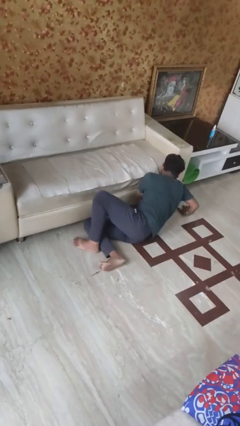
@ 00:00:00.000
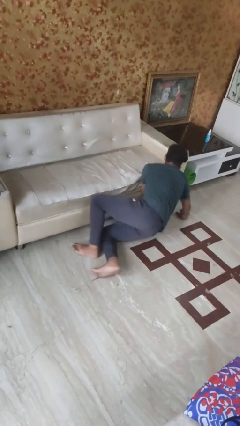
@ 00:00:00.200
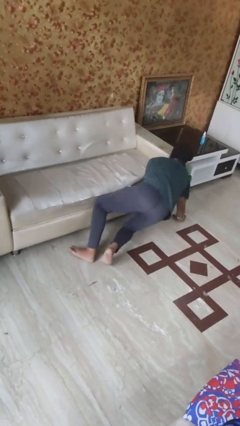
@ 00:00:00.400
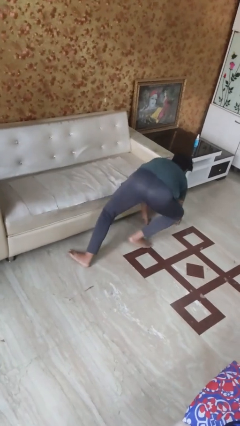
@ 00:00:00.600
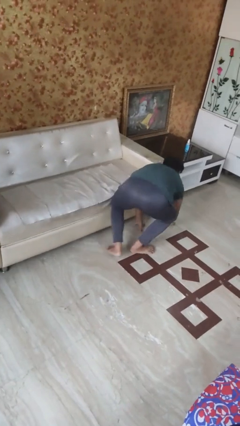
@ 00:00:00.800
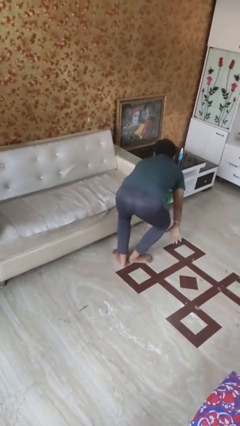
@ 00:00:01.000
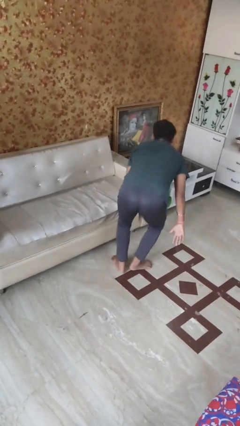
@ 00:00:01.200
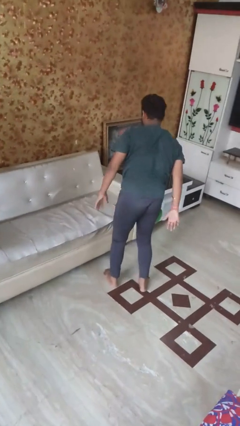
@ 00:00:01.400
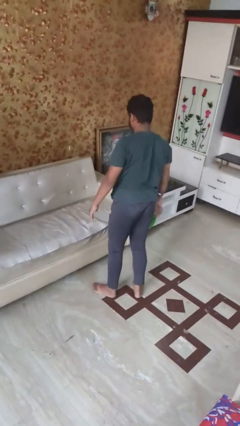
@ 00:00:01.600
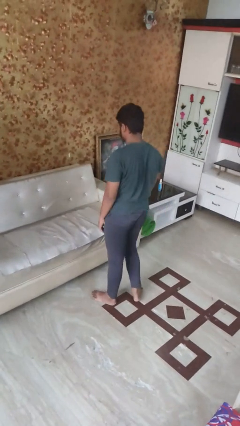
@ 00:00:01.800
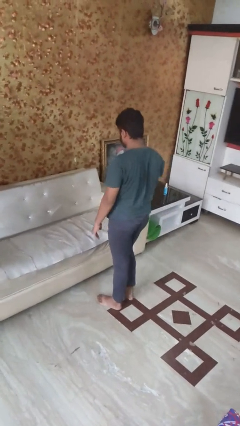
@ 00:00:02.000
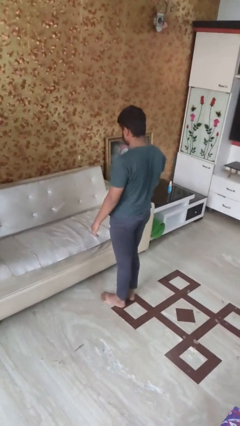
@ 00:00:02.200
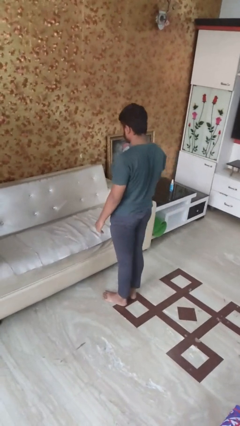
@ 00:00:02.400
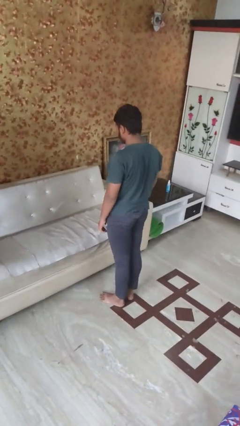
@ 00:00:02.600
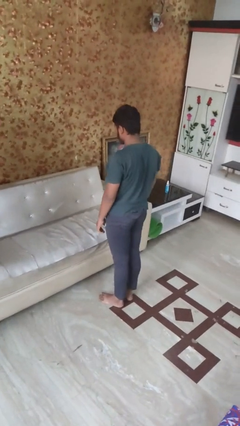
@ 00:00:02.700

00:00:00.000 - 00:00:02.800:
person stands up from floor

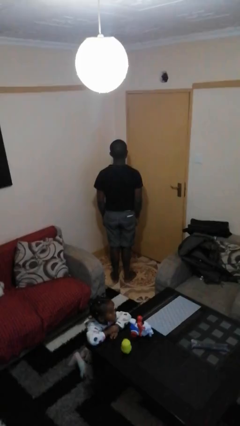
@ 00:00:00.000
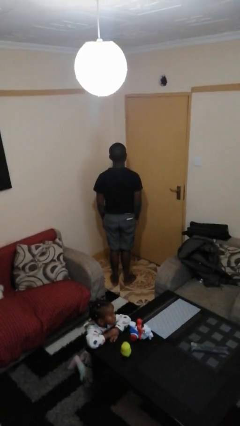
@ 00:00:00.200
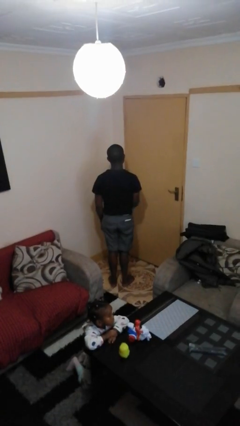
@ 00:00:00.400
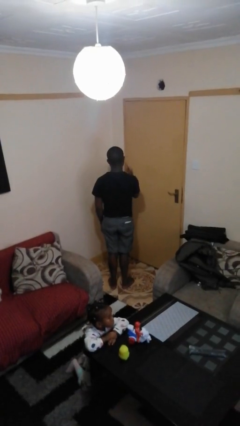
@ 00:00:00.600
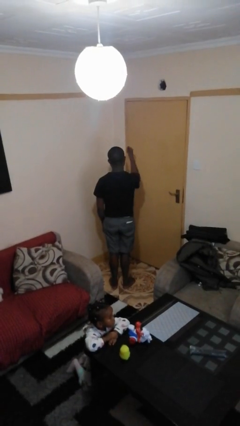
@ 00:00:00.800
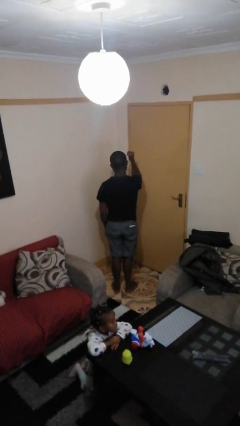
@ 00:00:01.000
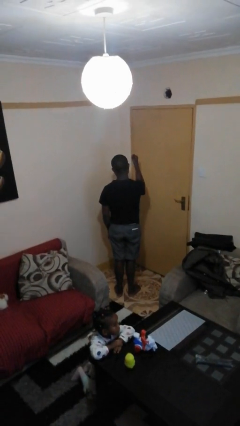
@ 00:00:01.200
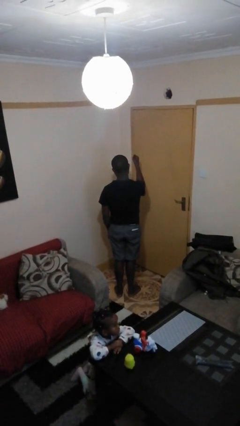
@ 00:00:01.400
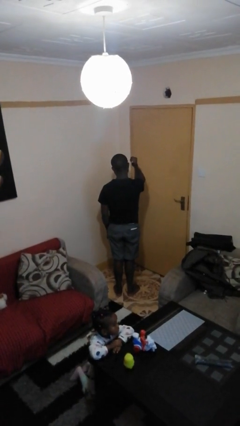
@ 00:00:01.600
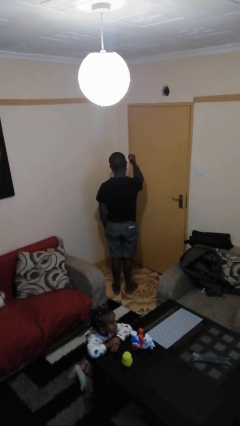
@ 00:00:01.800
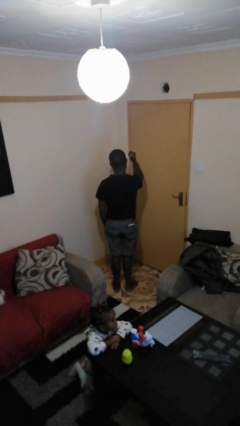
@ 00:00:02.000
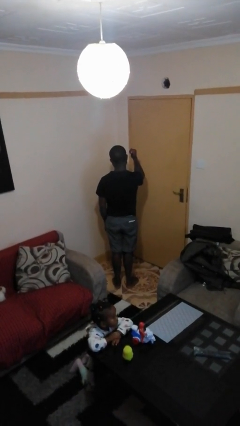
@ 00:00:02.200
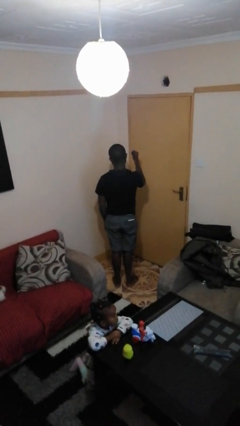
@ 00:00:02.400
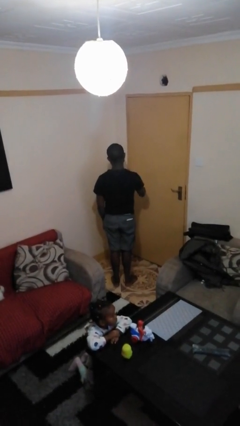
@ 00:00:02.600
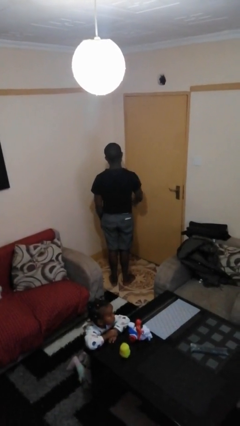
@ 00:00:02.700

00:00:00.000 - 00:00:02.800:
person gestures behind me

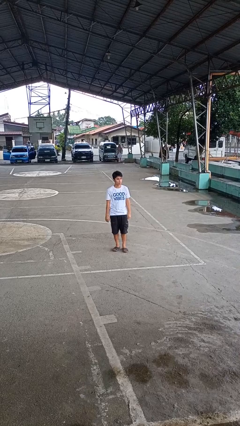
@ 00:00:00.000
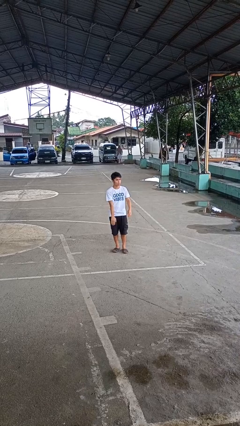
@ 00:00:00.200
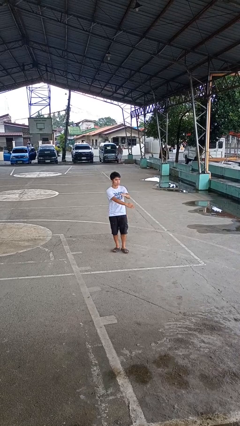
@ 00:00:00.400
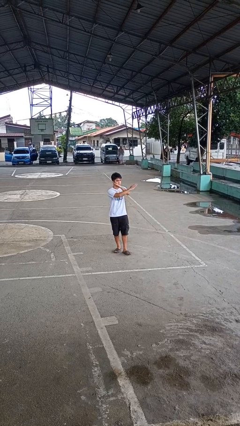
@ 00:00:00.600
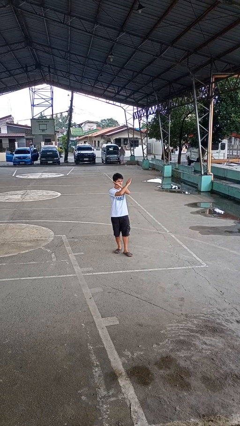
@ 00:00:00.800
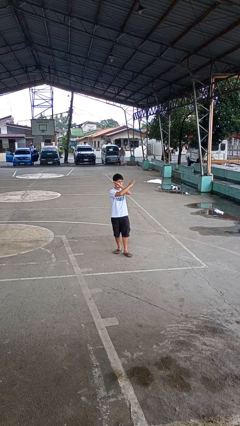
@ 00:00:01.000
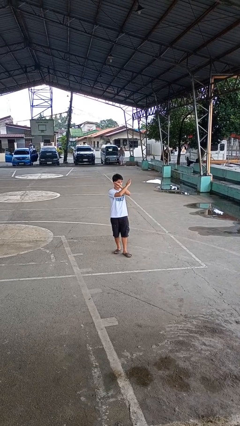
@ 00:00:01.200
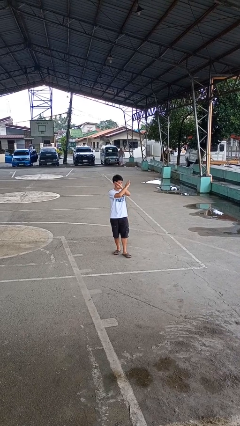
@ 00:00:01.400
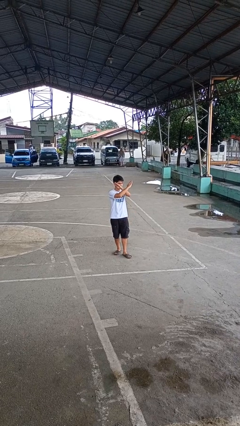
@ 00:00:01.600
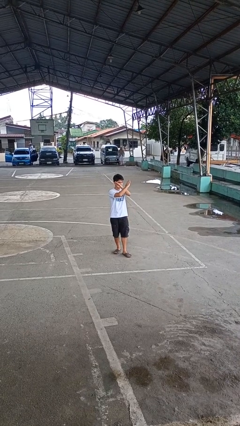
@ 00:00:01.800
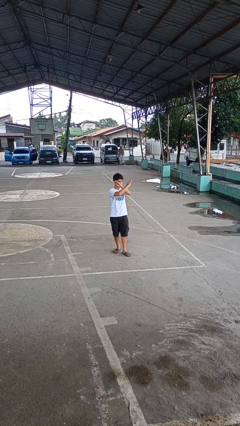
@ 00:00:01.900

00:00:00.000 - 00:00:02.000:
person gestures arms x

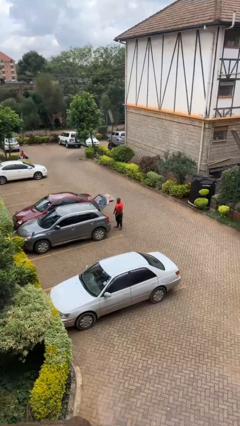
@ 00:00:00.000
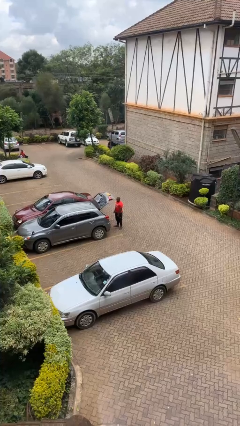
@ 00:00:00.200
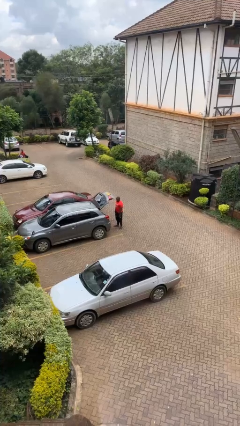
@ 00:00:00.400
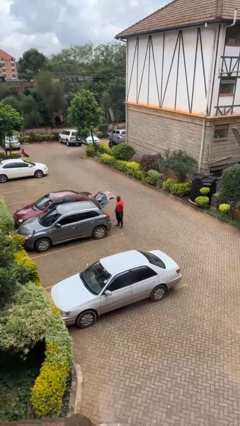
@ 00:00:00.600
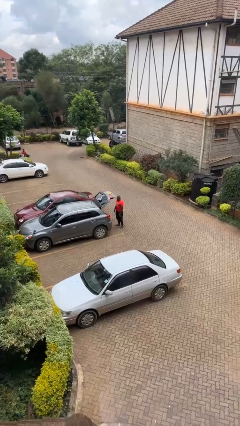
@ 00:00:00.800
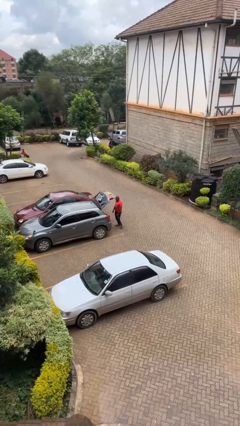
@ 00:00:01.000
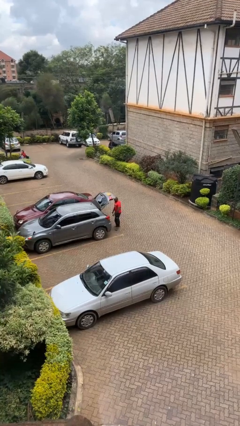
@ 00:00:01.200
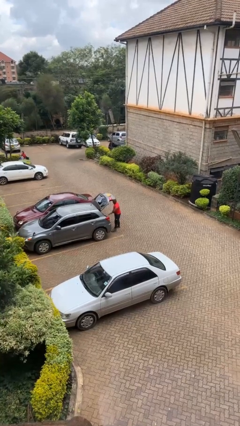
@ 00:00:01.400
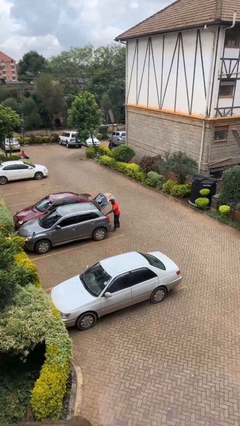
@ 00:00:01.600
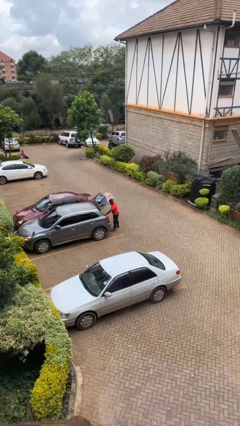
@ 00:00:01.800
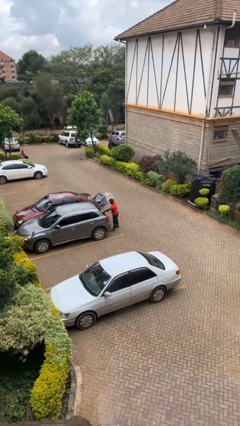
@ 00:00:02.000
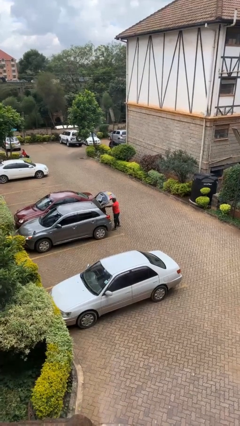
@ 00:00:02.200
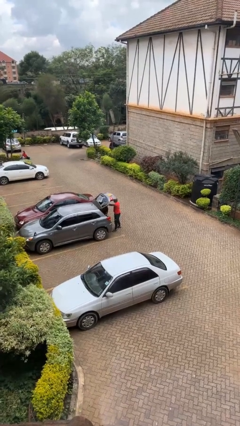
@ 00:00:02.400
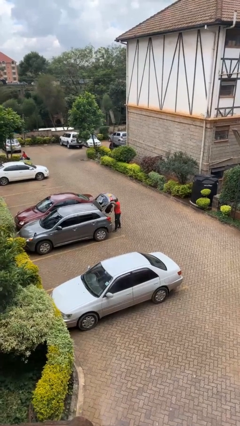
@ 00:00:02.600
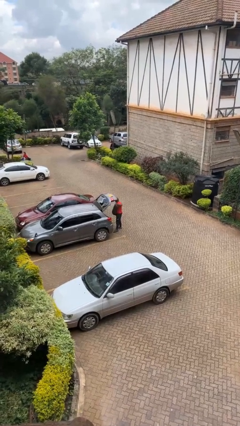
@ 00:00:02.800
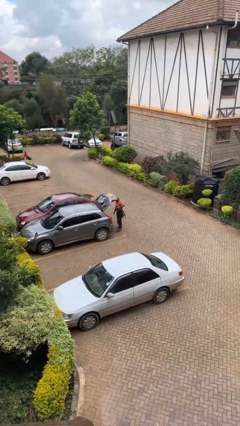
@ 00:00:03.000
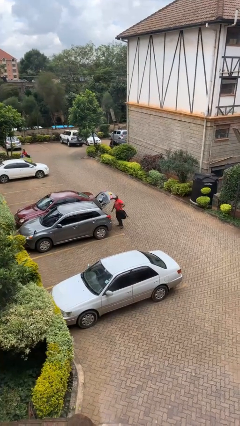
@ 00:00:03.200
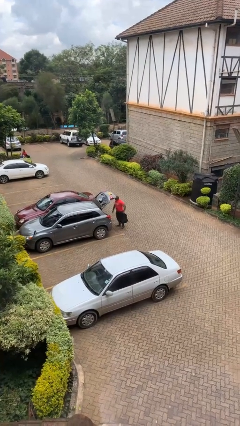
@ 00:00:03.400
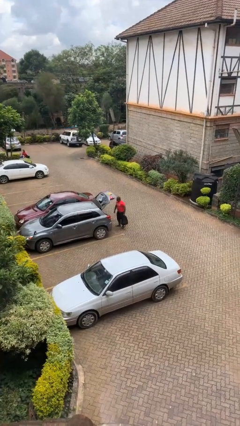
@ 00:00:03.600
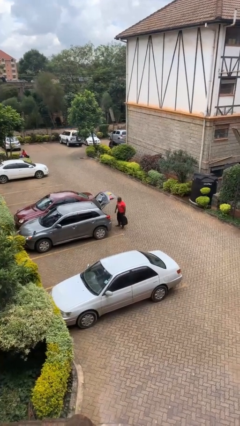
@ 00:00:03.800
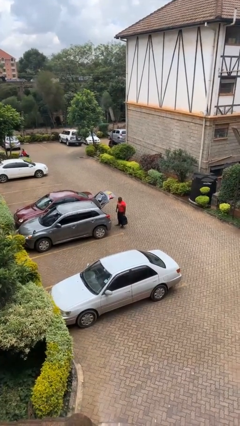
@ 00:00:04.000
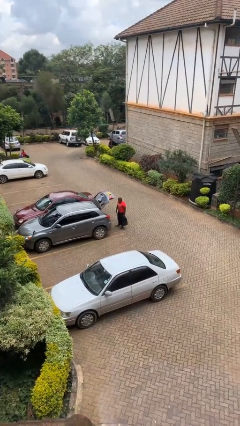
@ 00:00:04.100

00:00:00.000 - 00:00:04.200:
person unloads car

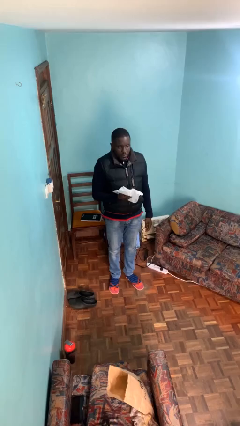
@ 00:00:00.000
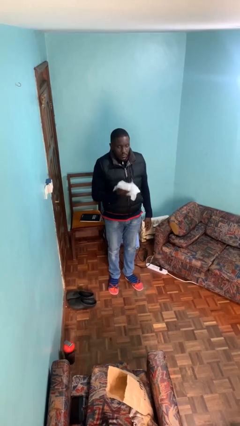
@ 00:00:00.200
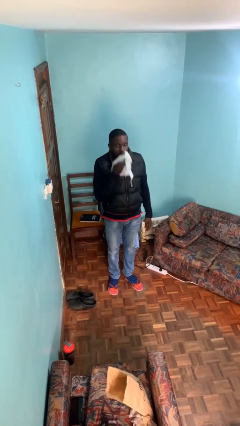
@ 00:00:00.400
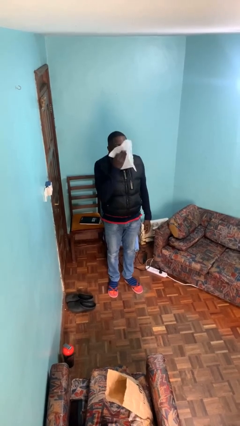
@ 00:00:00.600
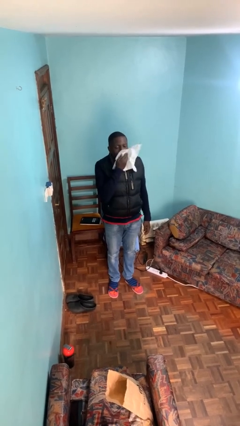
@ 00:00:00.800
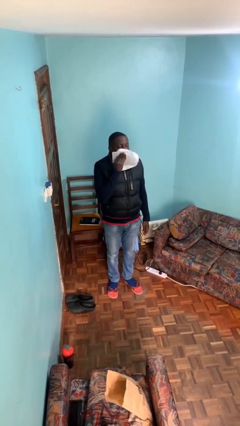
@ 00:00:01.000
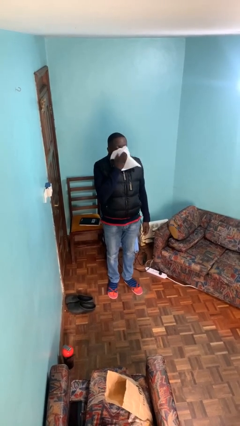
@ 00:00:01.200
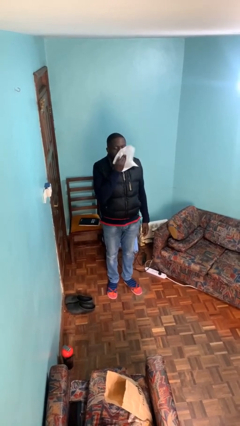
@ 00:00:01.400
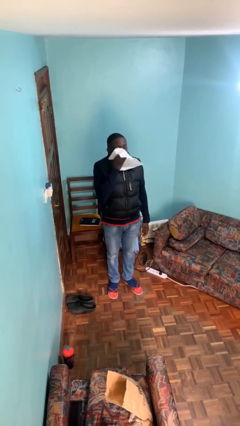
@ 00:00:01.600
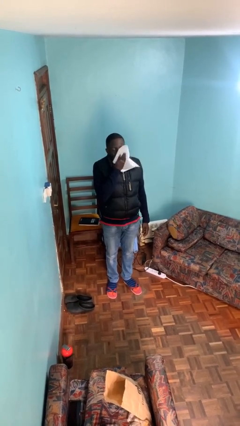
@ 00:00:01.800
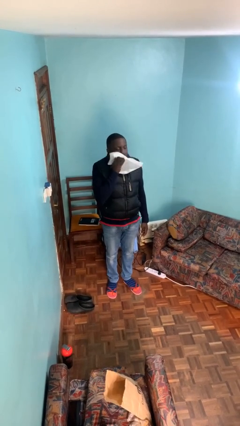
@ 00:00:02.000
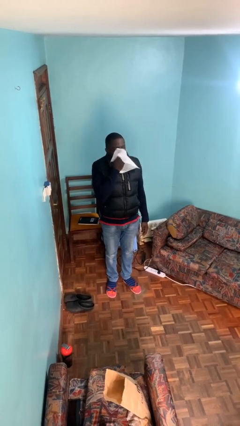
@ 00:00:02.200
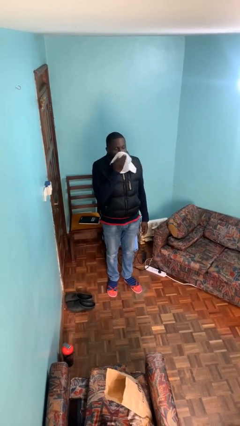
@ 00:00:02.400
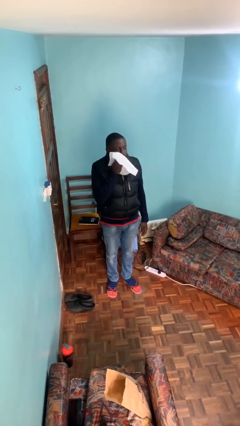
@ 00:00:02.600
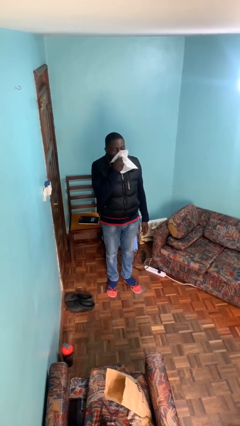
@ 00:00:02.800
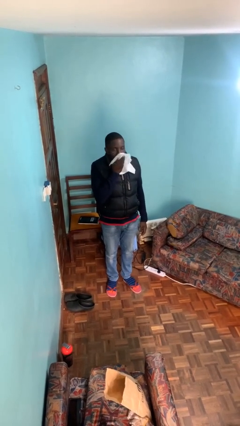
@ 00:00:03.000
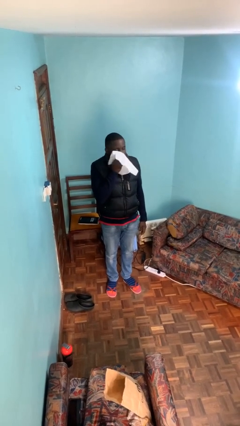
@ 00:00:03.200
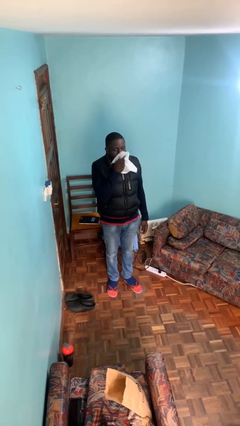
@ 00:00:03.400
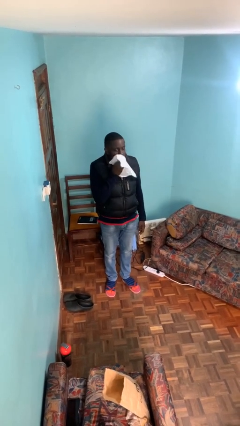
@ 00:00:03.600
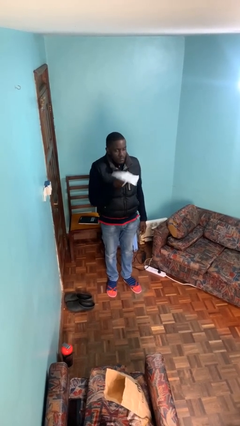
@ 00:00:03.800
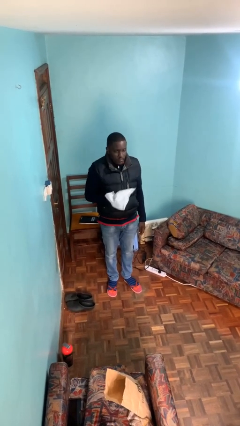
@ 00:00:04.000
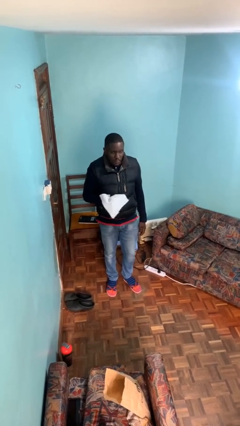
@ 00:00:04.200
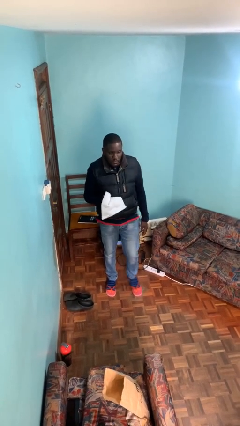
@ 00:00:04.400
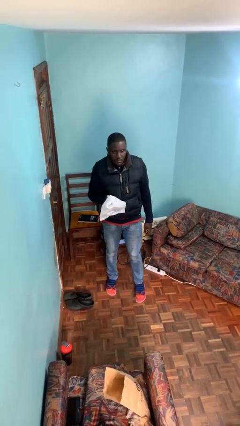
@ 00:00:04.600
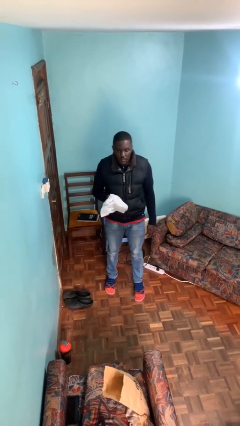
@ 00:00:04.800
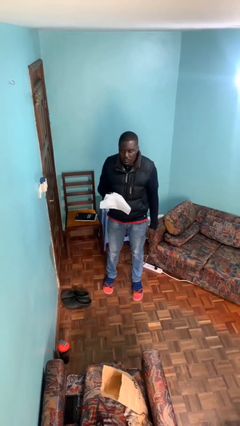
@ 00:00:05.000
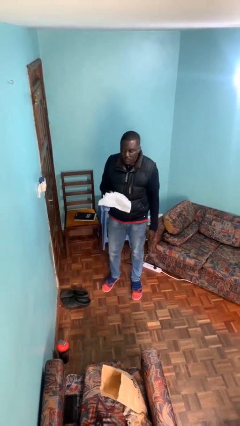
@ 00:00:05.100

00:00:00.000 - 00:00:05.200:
person wipes mouth with napkin
